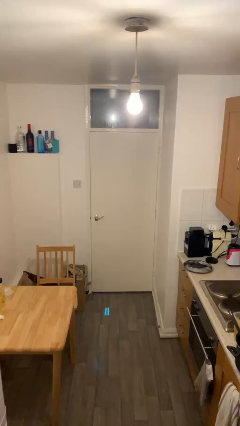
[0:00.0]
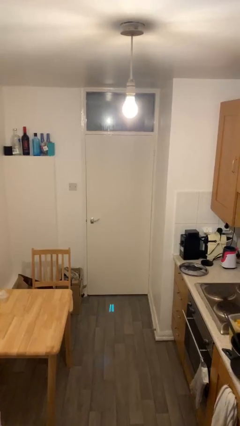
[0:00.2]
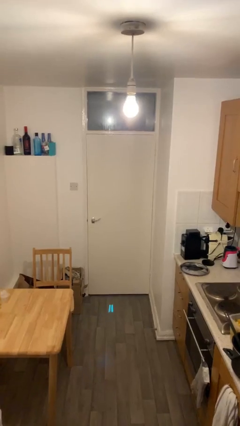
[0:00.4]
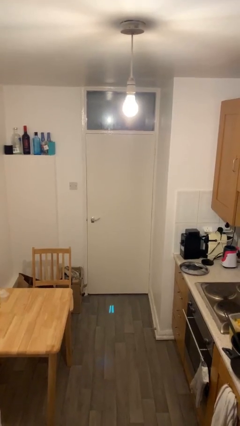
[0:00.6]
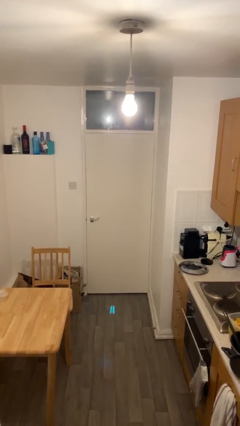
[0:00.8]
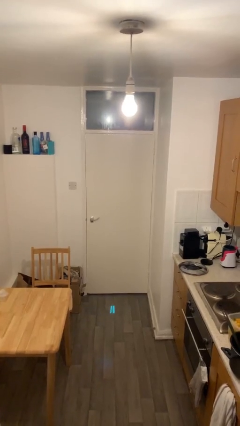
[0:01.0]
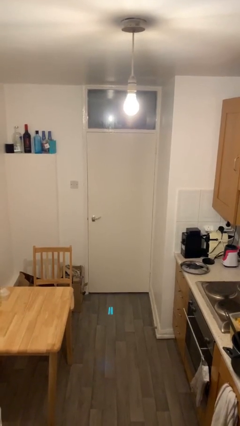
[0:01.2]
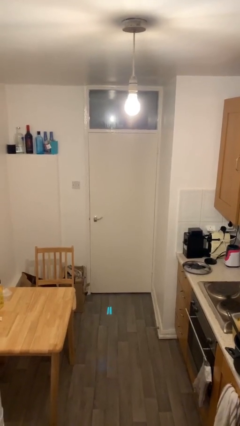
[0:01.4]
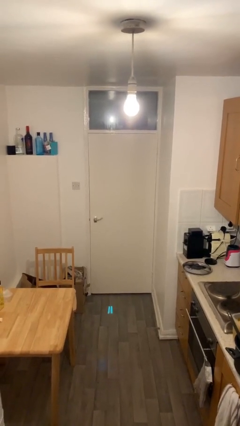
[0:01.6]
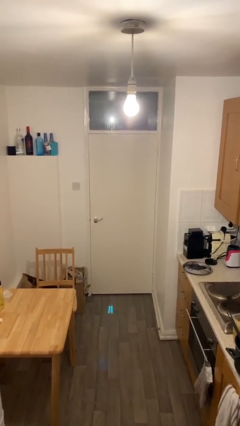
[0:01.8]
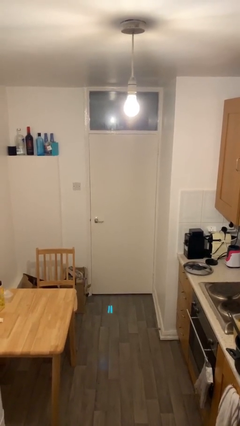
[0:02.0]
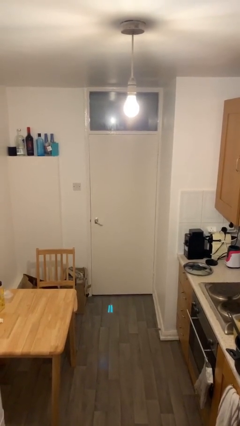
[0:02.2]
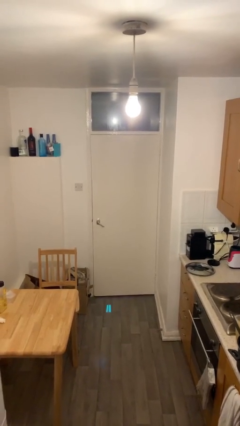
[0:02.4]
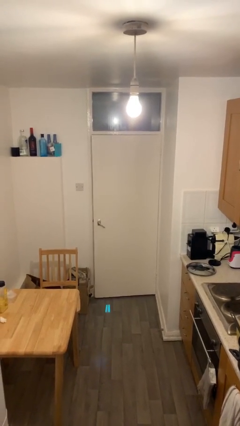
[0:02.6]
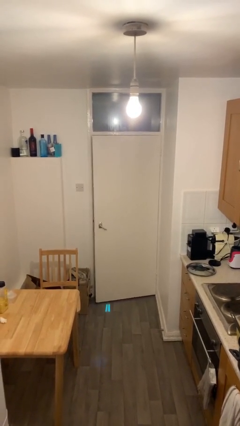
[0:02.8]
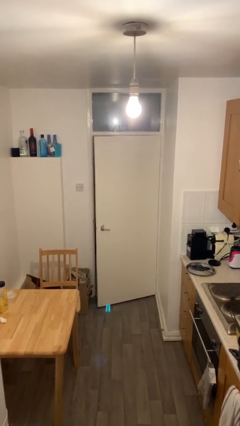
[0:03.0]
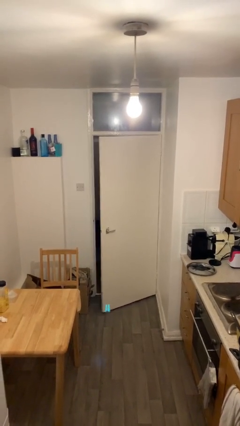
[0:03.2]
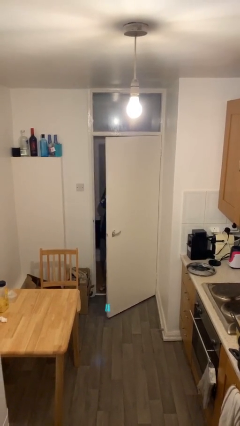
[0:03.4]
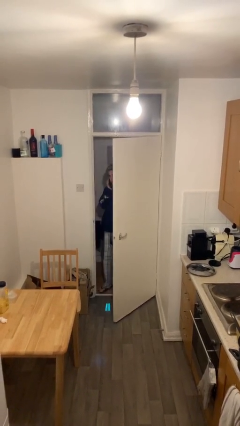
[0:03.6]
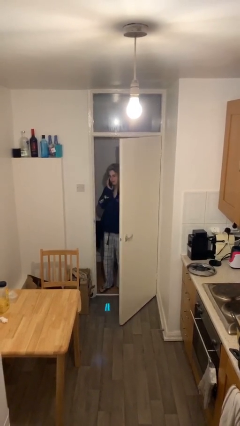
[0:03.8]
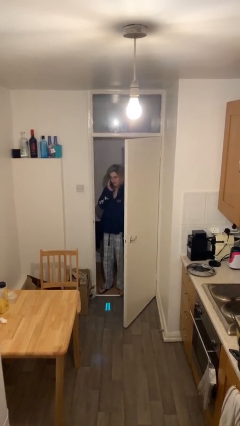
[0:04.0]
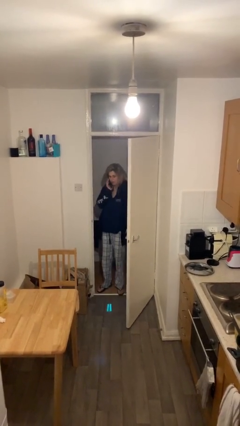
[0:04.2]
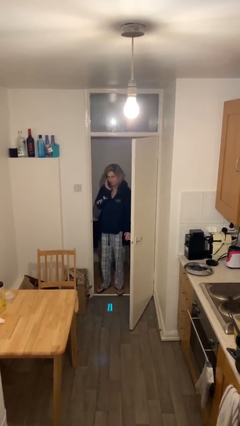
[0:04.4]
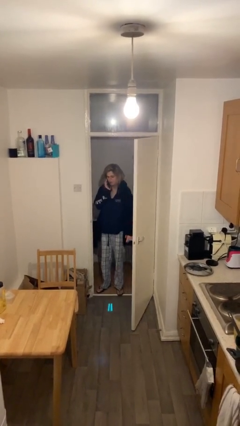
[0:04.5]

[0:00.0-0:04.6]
person opens facility door

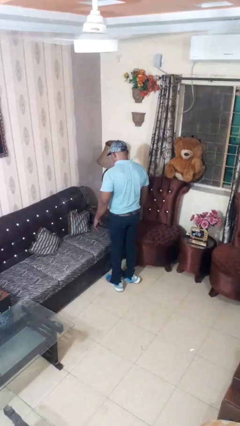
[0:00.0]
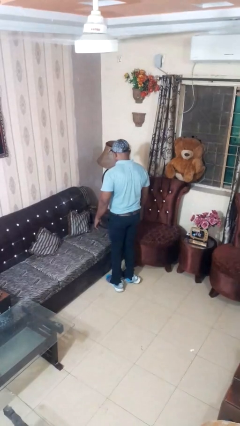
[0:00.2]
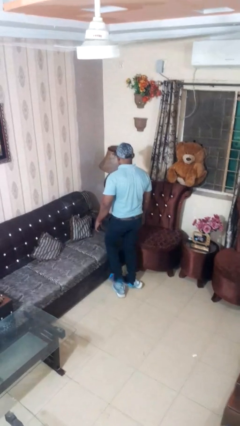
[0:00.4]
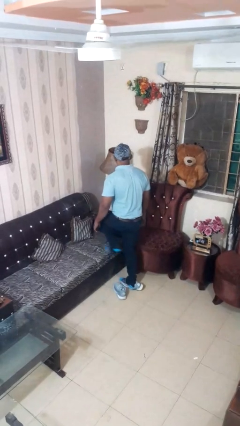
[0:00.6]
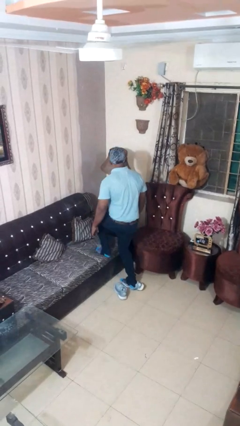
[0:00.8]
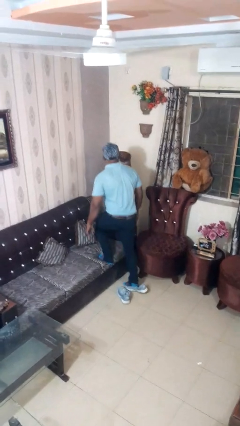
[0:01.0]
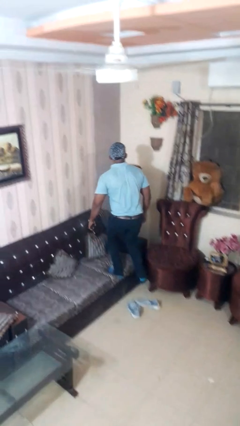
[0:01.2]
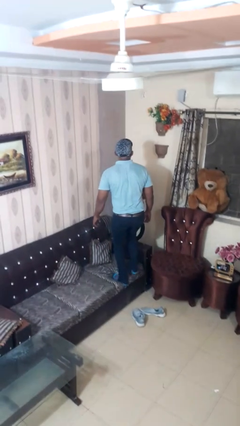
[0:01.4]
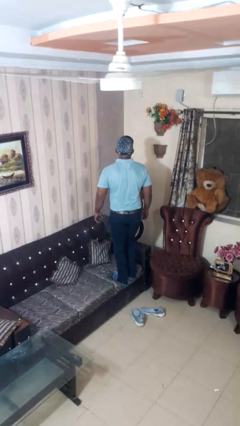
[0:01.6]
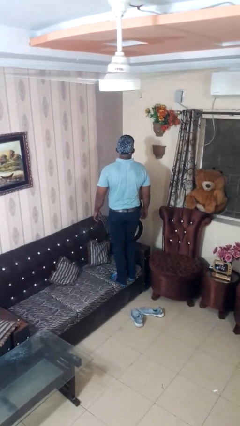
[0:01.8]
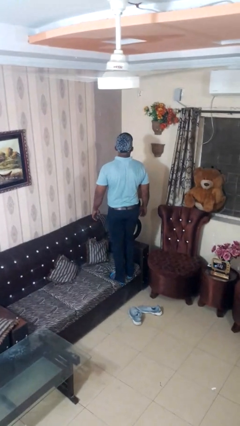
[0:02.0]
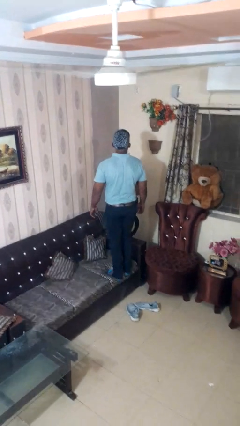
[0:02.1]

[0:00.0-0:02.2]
person climbs on couch

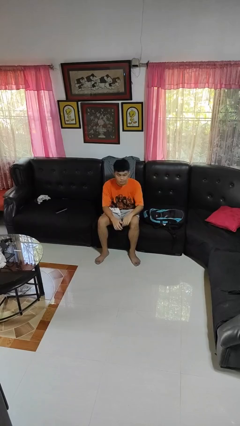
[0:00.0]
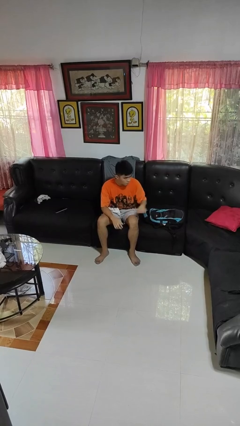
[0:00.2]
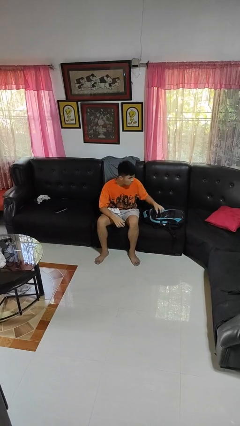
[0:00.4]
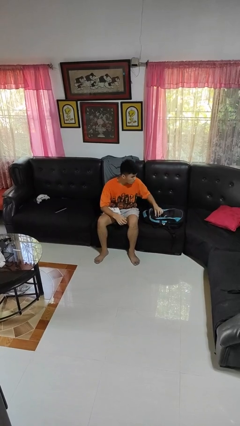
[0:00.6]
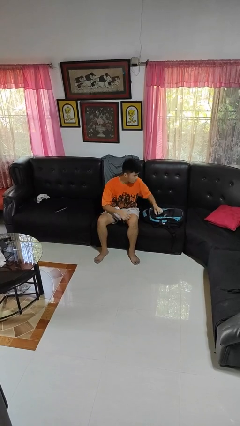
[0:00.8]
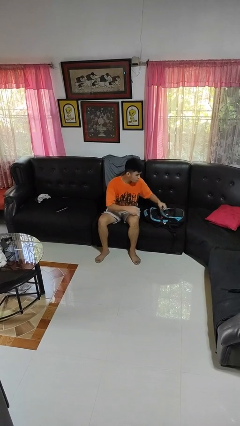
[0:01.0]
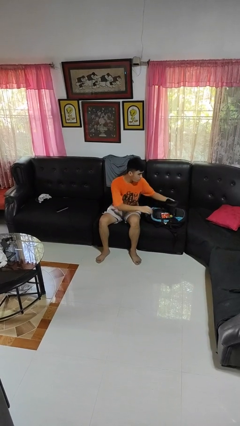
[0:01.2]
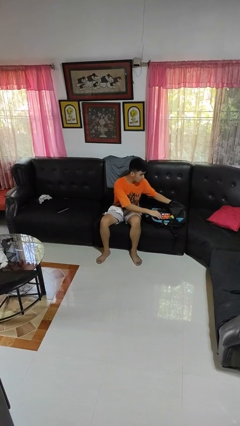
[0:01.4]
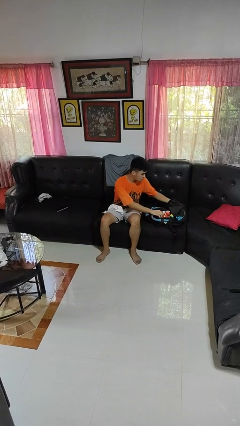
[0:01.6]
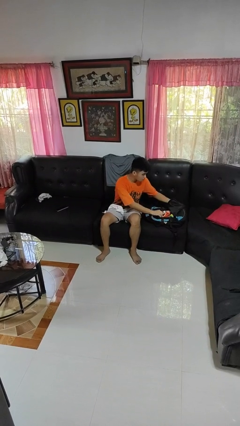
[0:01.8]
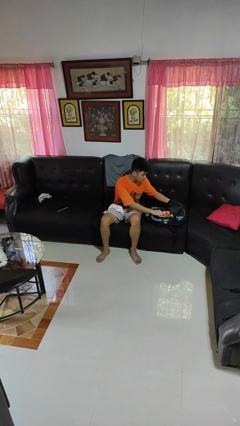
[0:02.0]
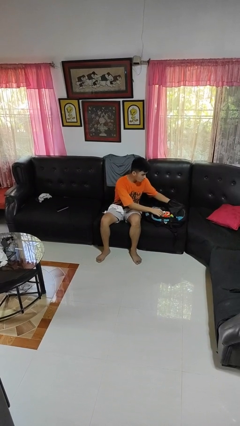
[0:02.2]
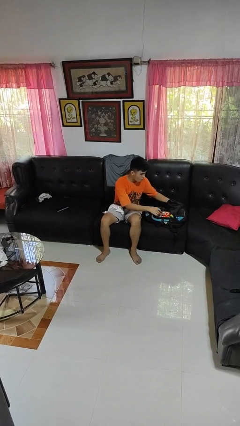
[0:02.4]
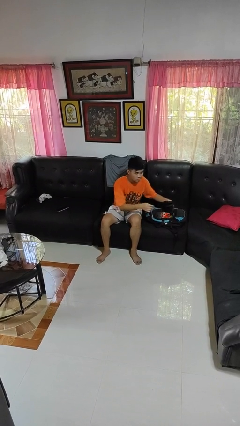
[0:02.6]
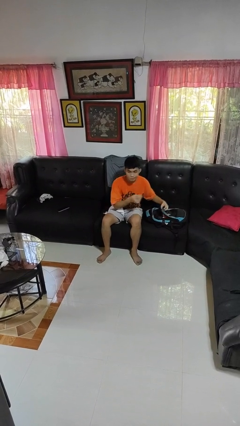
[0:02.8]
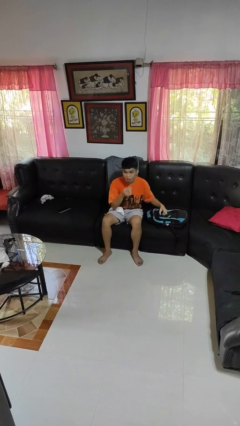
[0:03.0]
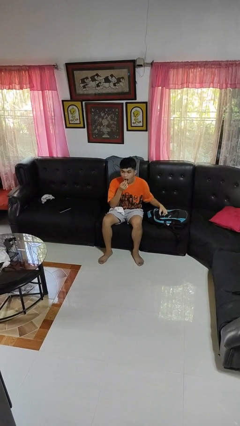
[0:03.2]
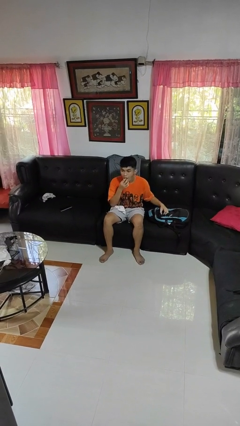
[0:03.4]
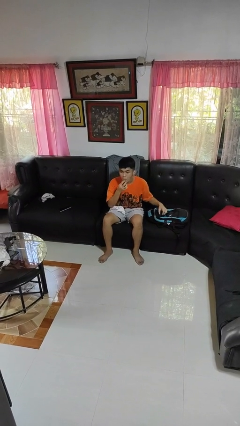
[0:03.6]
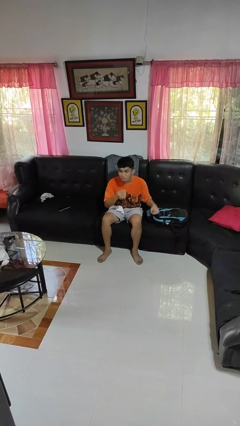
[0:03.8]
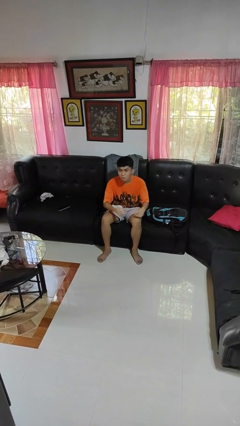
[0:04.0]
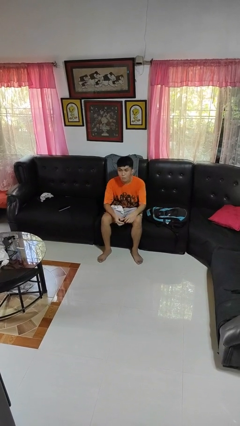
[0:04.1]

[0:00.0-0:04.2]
person eats snack from bag

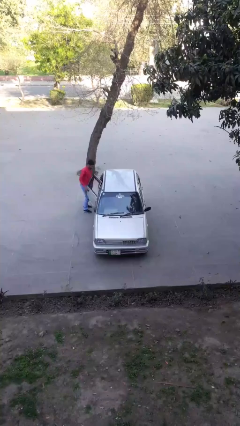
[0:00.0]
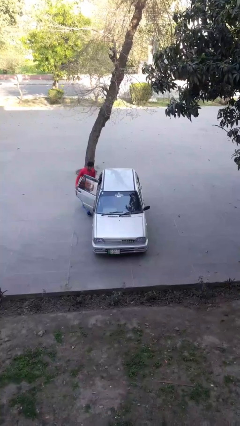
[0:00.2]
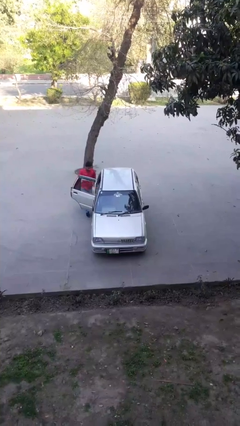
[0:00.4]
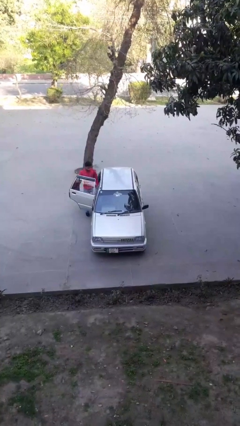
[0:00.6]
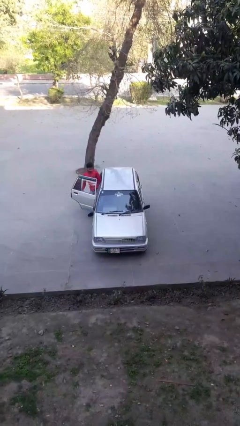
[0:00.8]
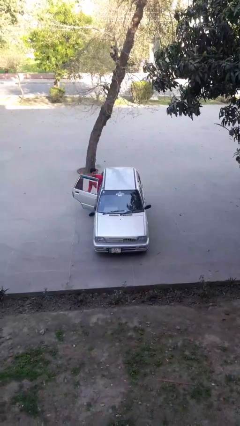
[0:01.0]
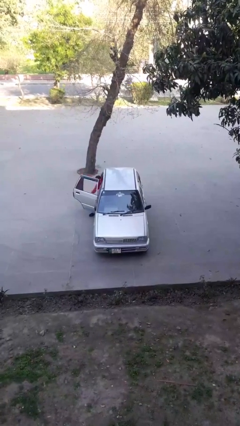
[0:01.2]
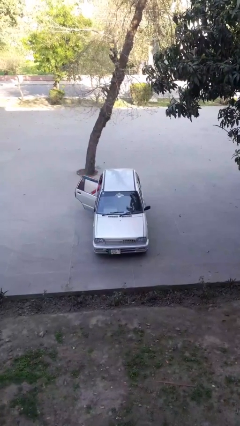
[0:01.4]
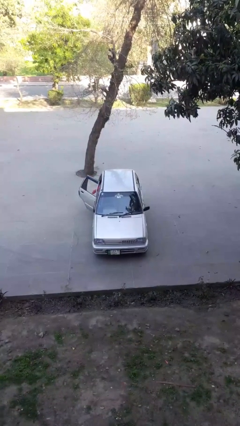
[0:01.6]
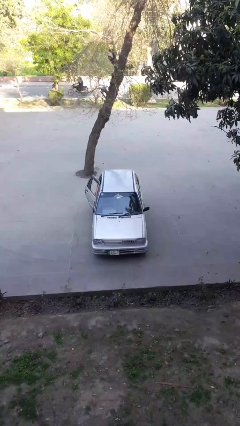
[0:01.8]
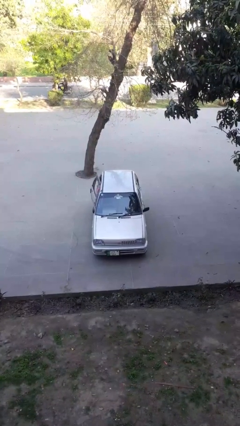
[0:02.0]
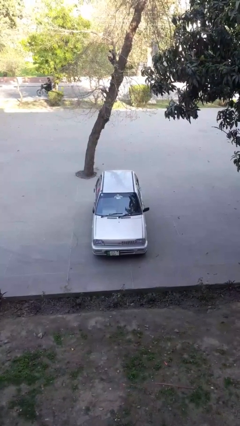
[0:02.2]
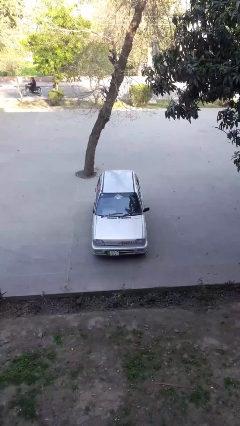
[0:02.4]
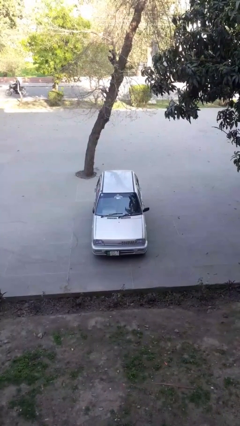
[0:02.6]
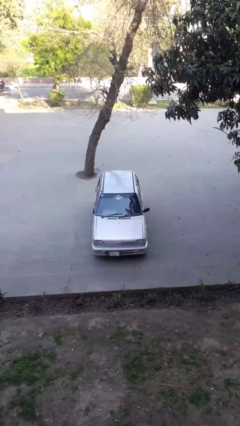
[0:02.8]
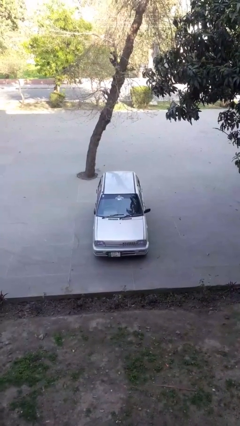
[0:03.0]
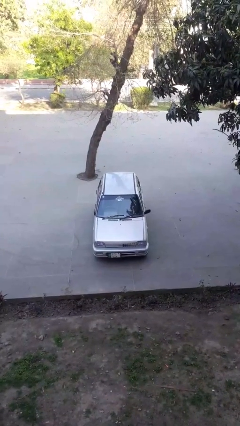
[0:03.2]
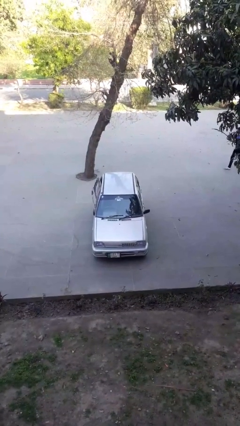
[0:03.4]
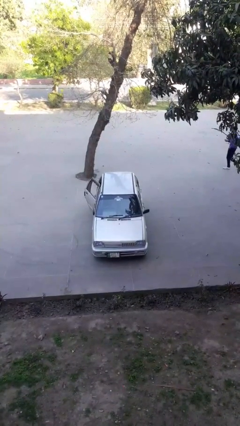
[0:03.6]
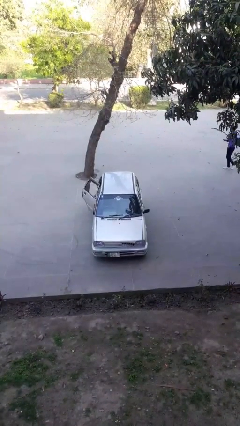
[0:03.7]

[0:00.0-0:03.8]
car picks up person

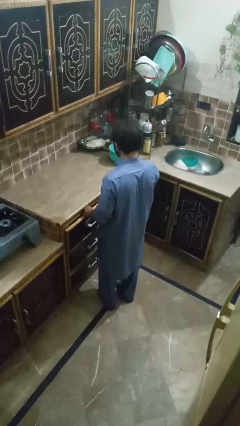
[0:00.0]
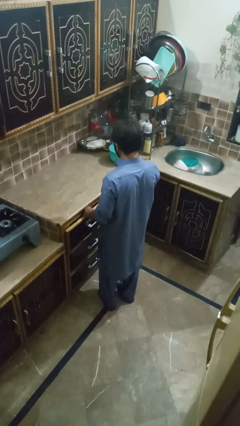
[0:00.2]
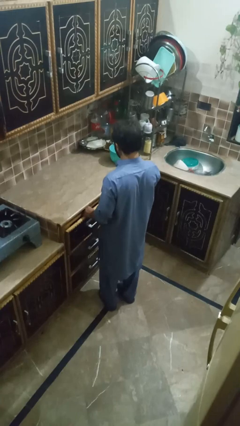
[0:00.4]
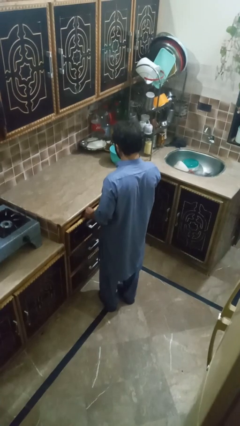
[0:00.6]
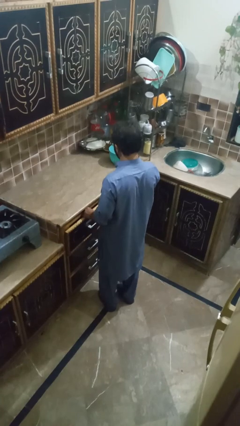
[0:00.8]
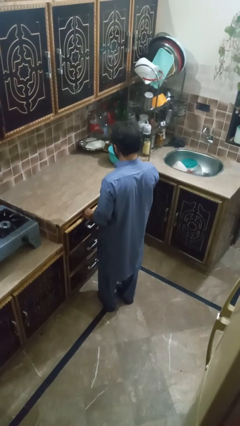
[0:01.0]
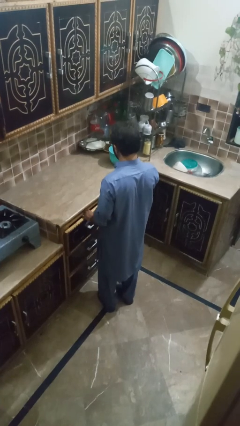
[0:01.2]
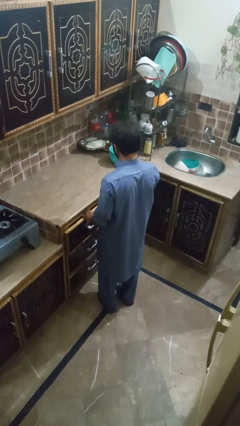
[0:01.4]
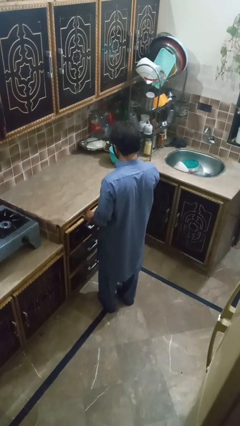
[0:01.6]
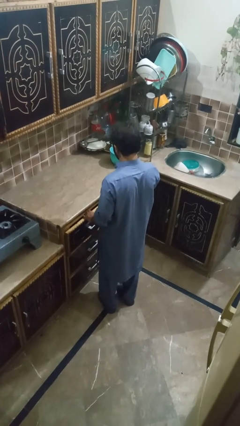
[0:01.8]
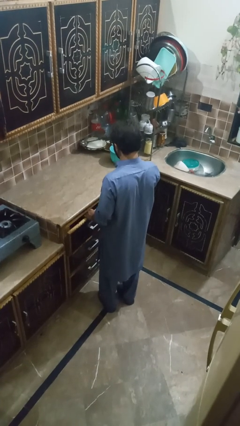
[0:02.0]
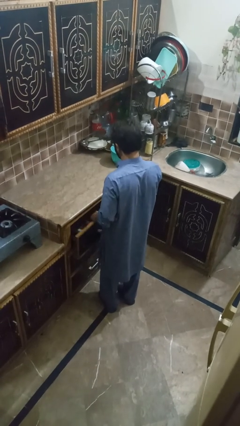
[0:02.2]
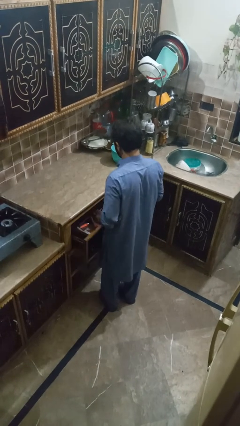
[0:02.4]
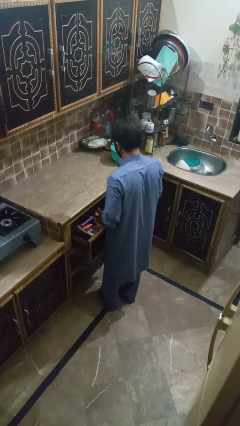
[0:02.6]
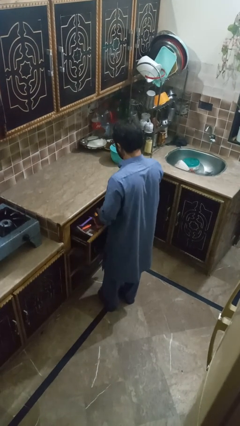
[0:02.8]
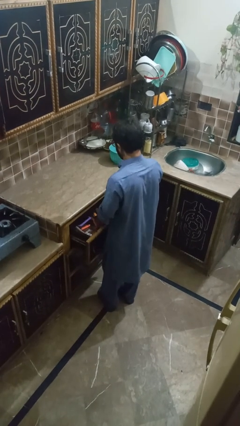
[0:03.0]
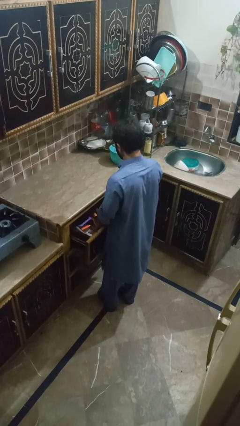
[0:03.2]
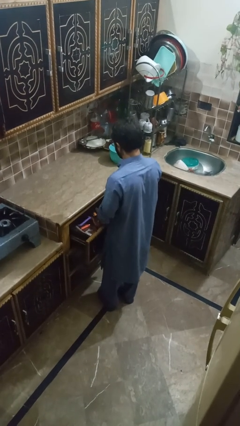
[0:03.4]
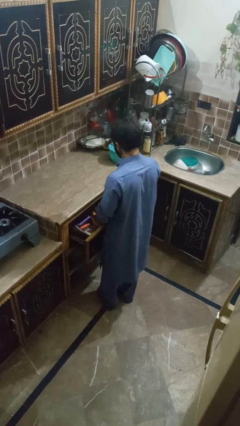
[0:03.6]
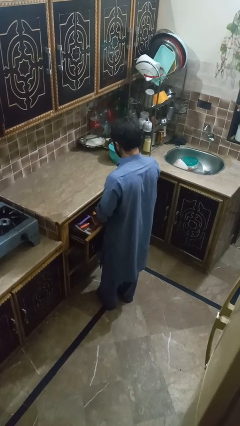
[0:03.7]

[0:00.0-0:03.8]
person searches in kitchen drawer
